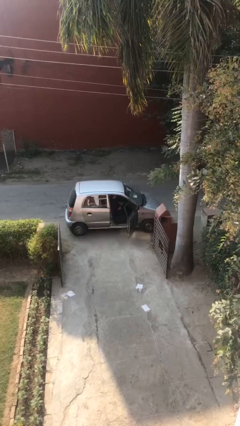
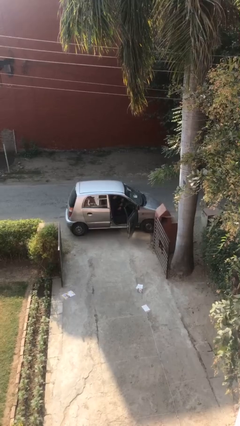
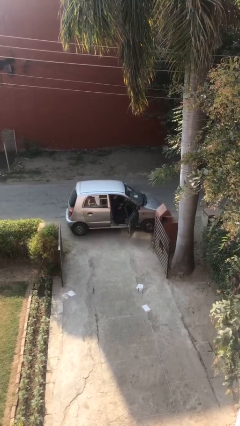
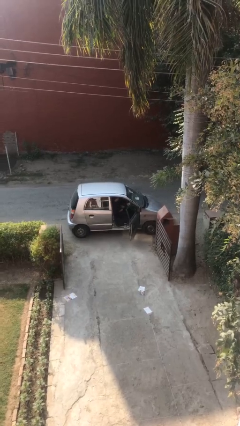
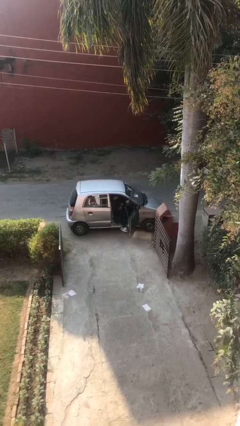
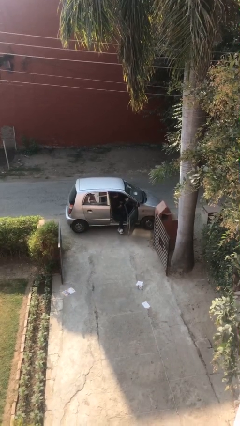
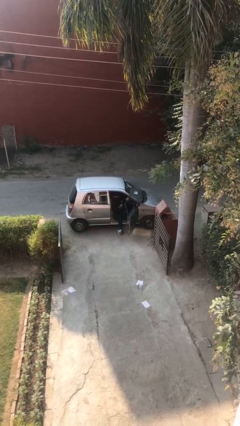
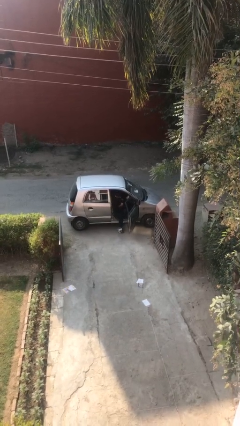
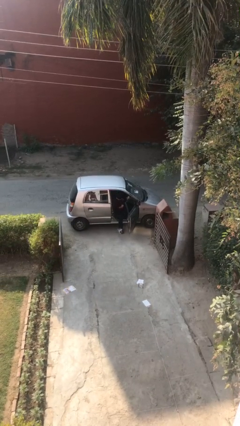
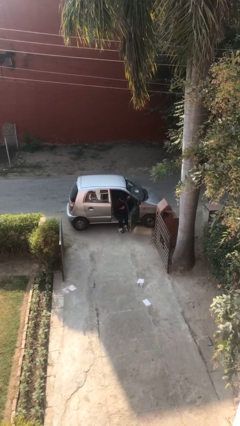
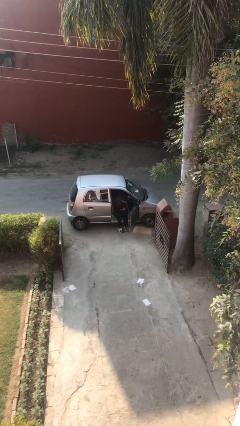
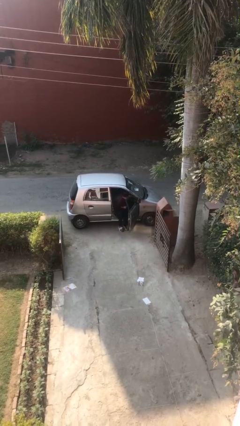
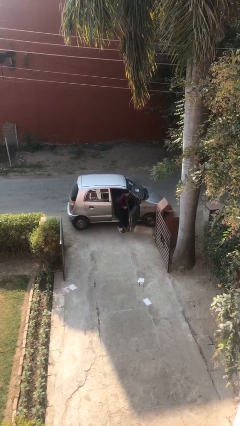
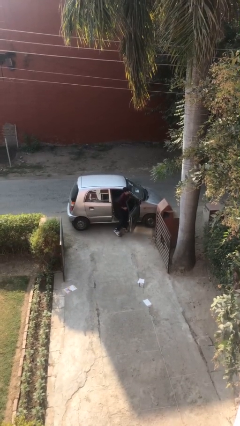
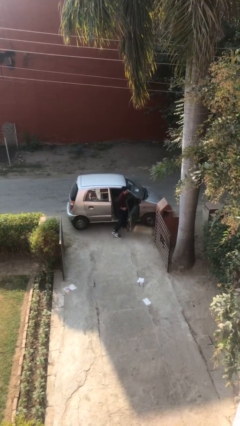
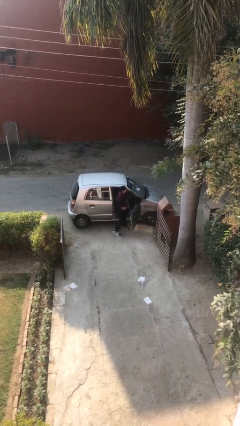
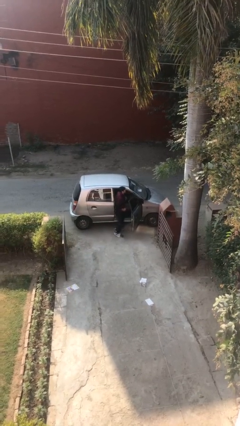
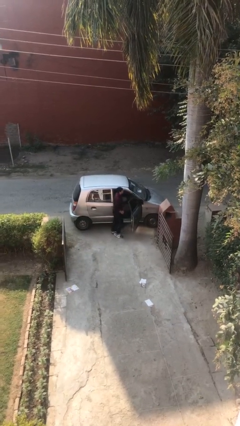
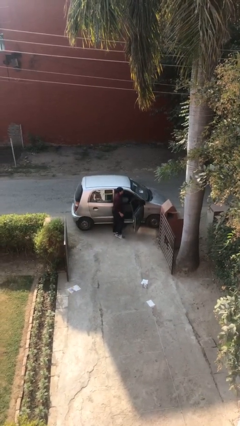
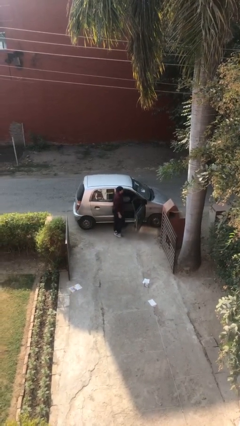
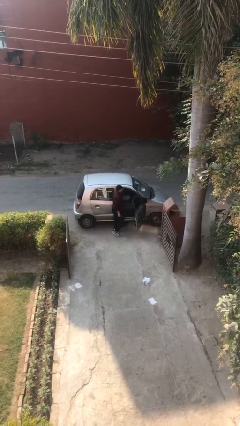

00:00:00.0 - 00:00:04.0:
person exits car

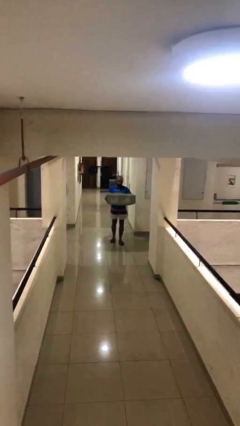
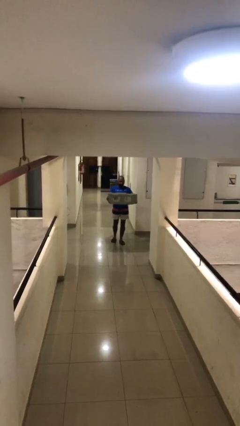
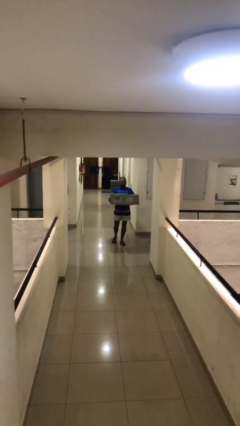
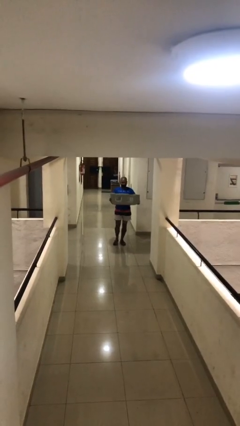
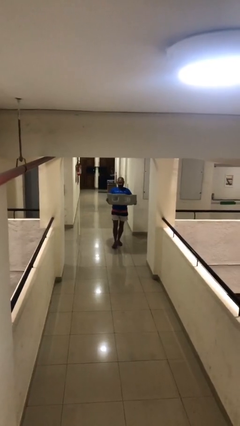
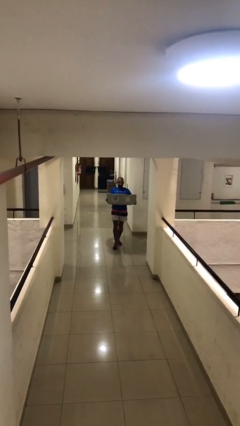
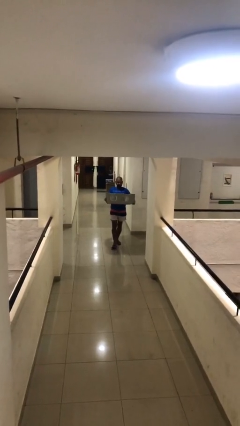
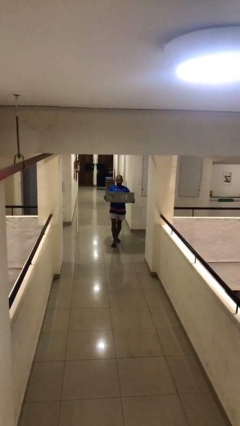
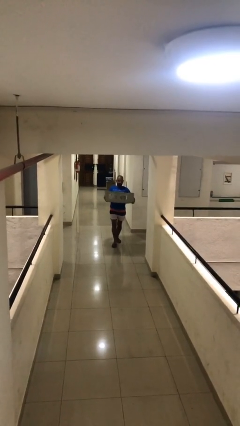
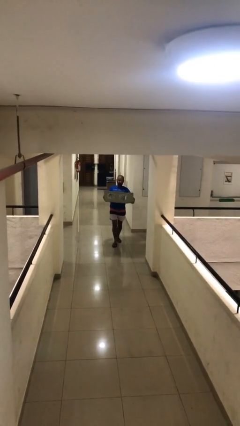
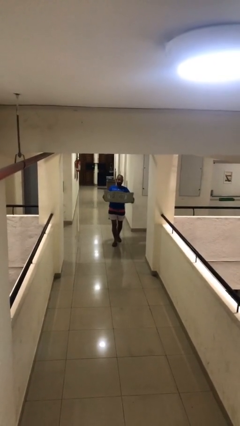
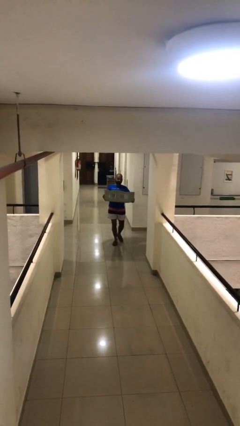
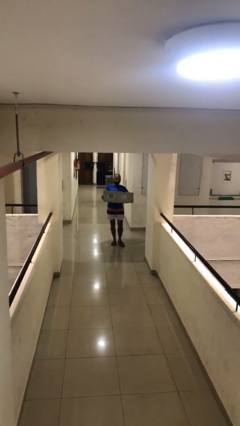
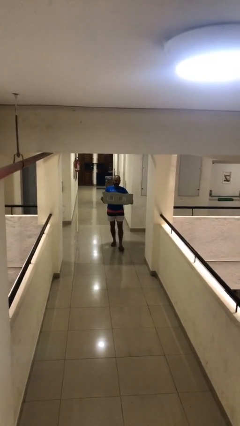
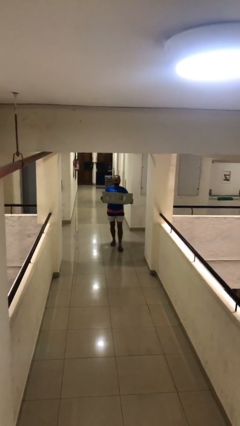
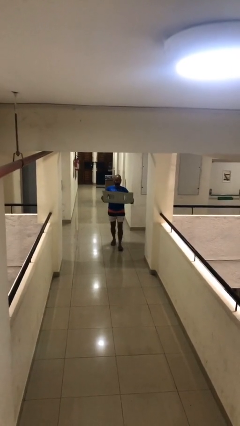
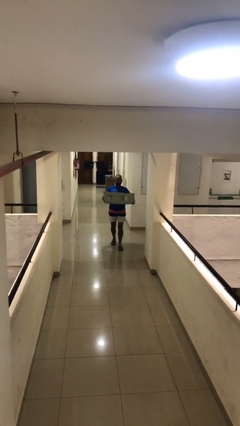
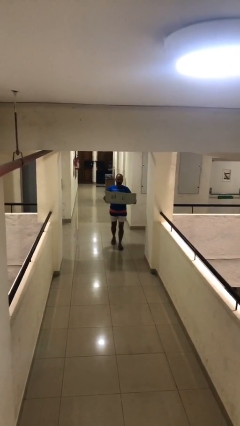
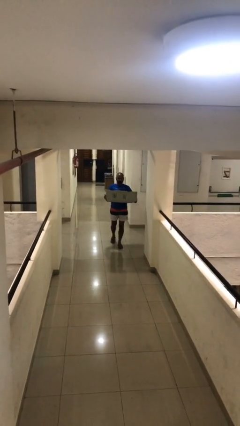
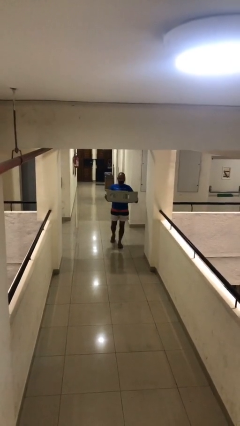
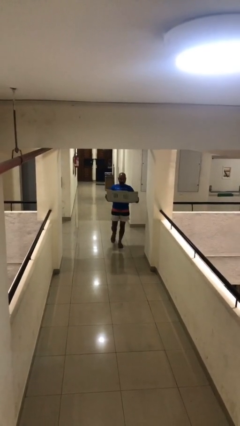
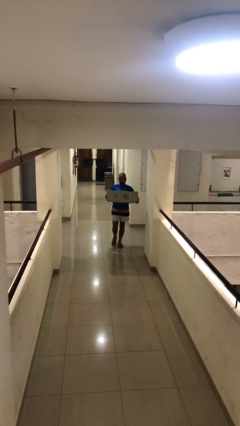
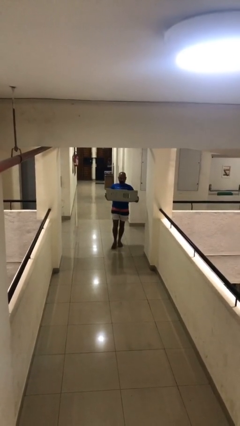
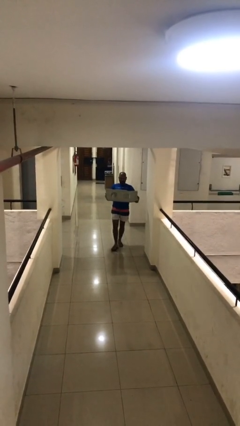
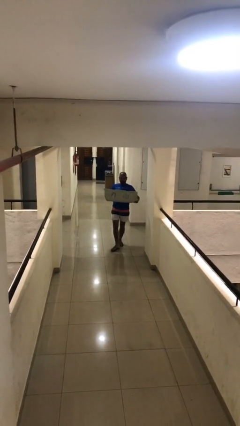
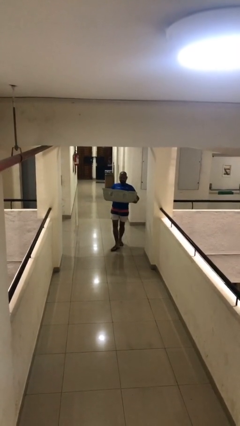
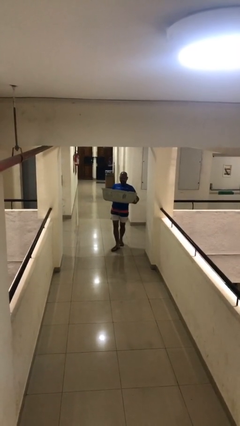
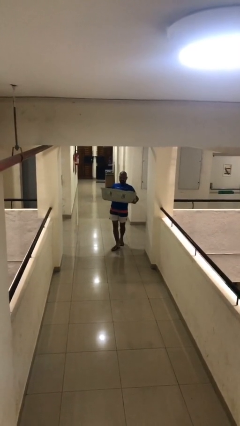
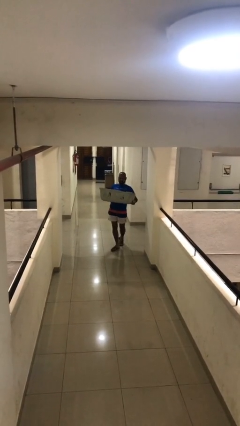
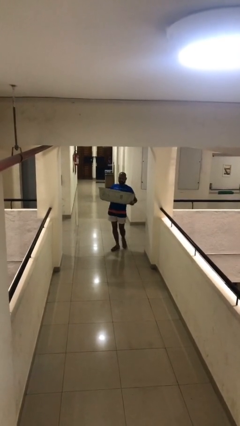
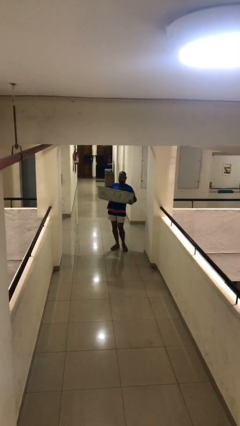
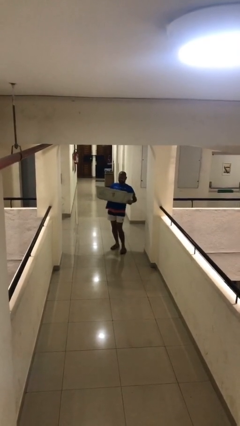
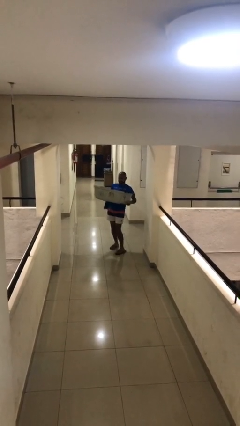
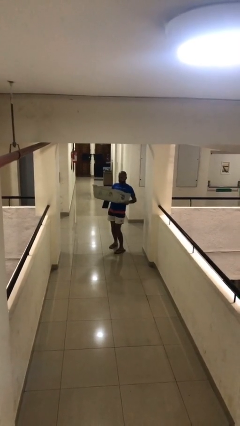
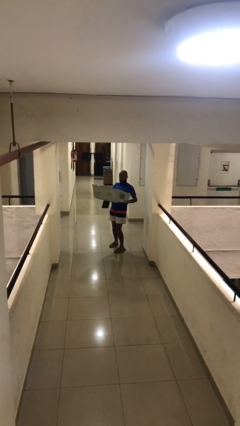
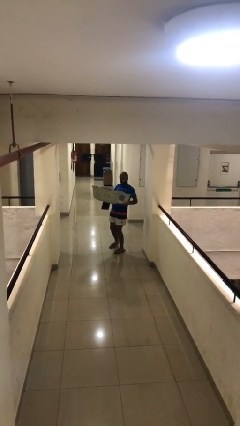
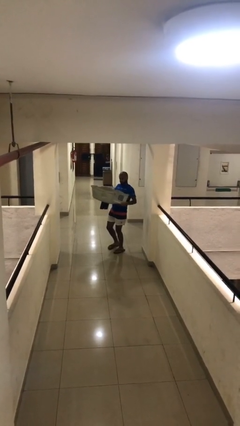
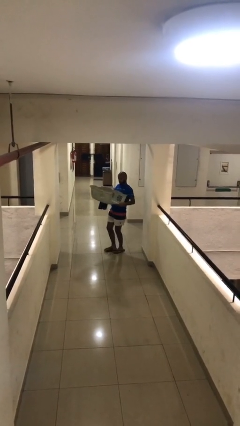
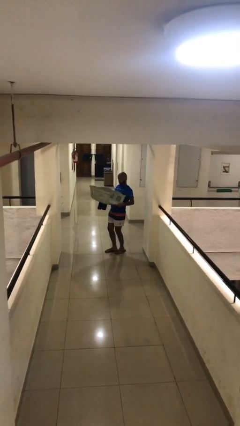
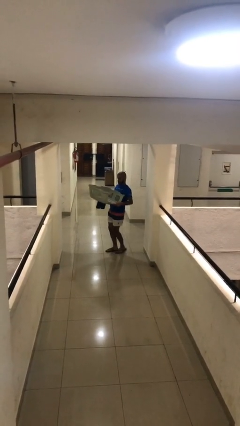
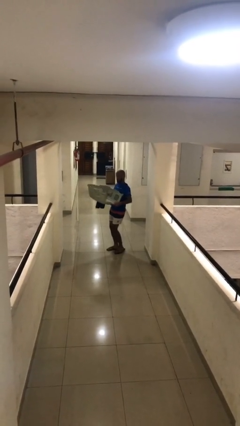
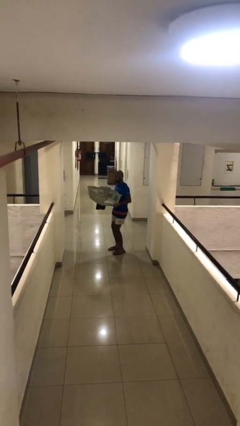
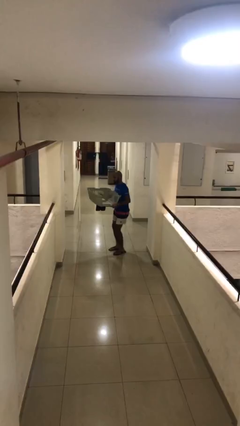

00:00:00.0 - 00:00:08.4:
person carries heavy object

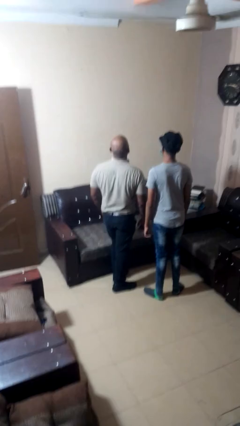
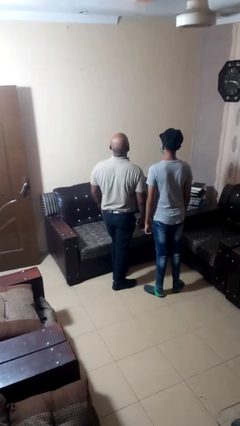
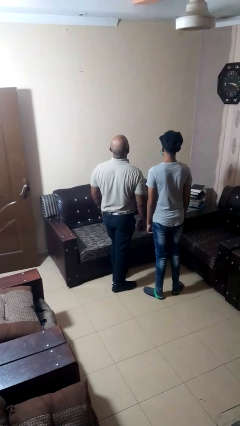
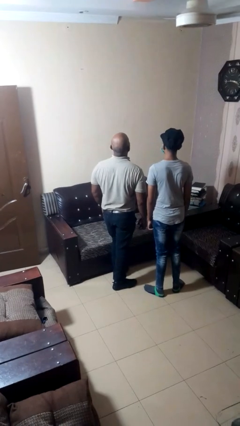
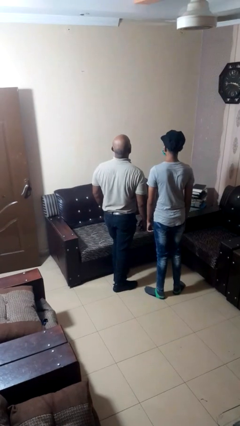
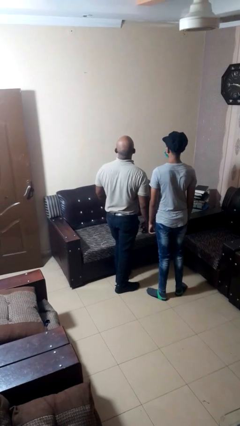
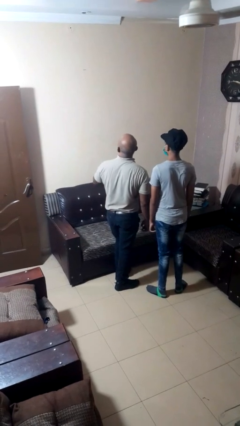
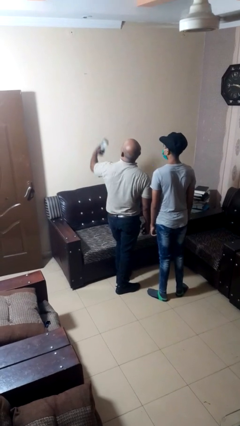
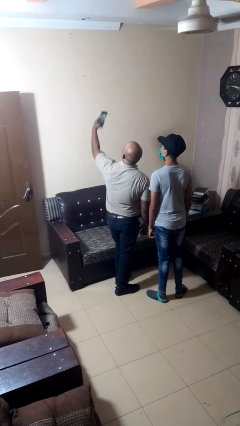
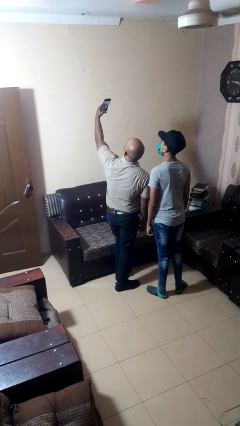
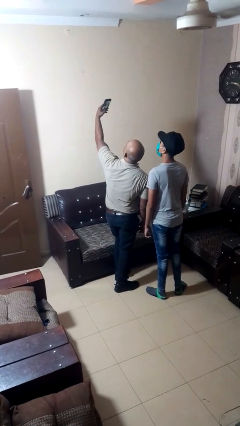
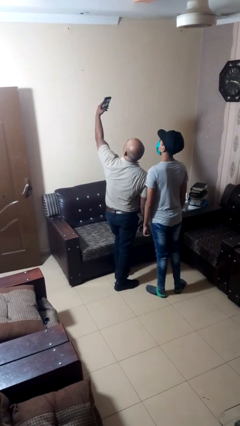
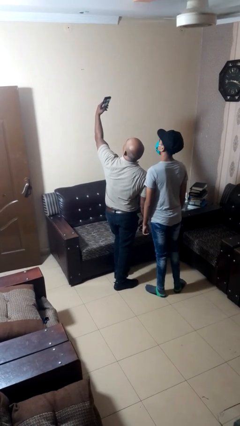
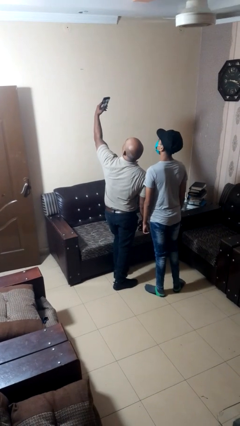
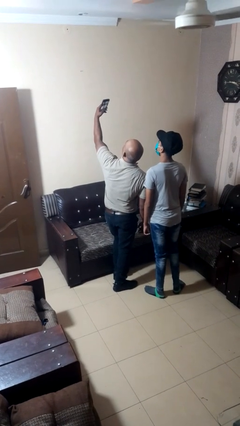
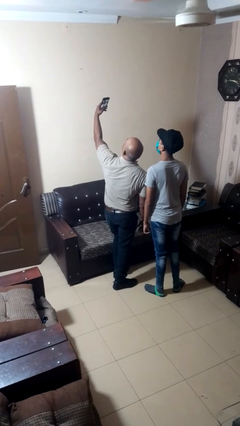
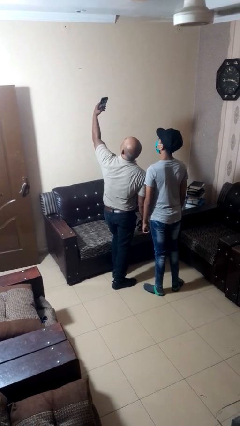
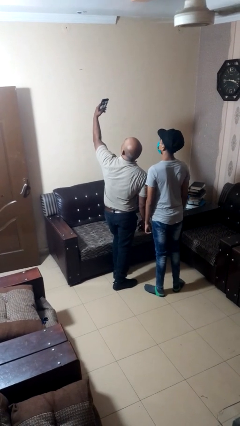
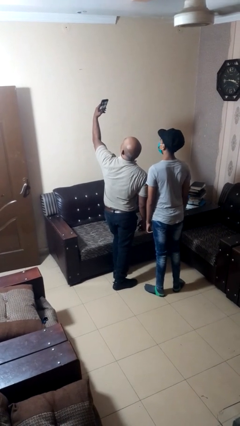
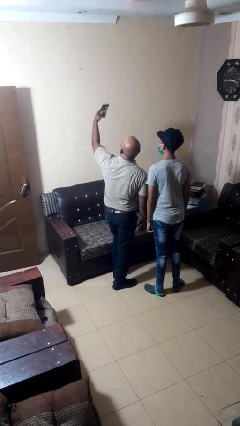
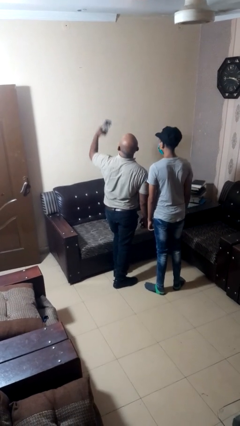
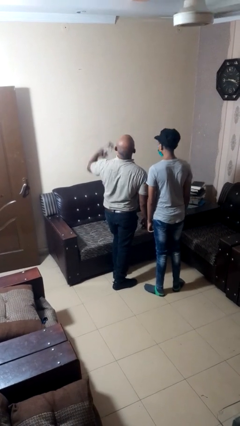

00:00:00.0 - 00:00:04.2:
person takes selfie with person

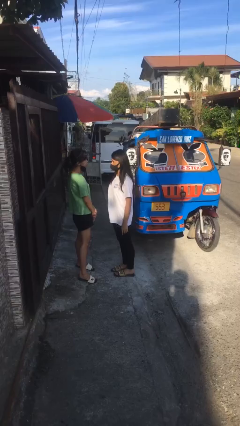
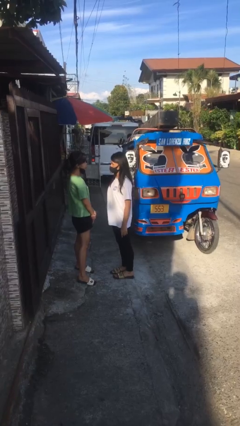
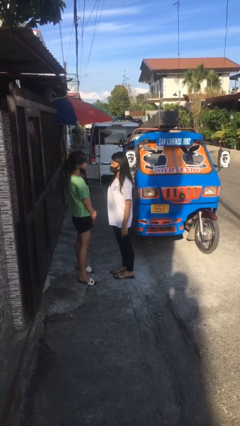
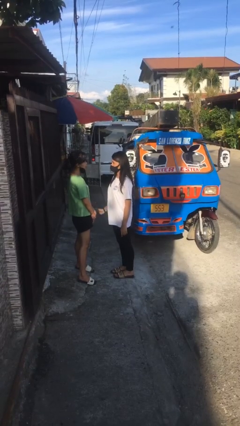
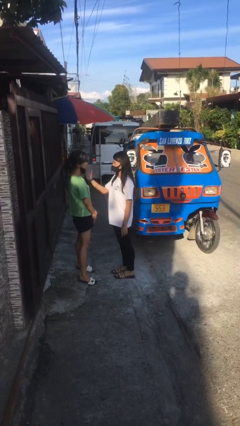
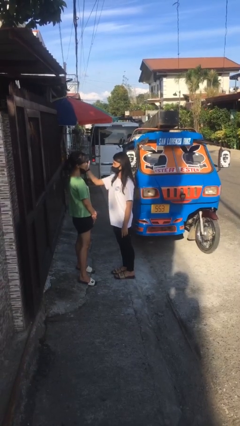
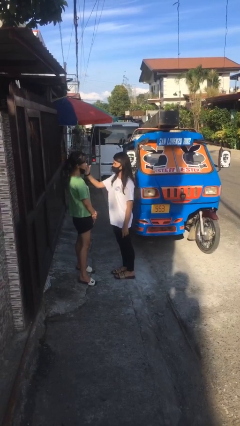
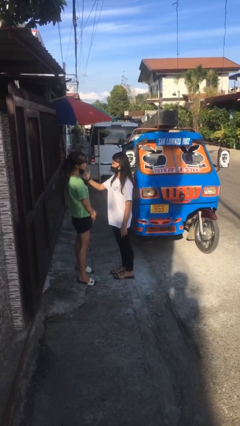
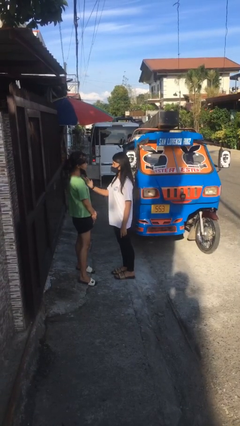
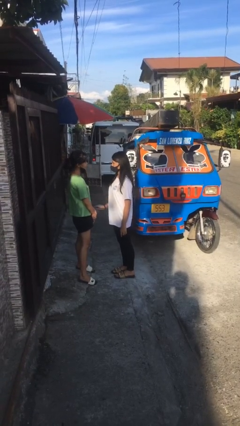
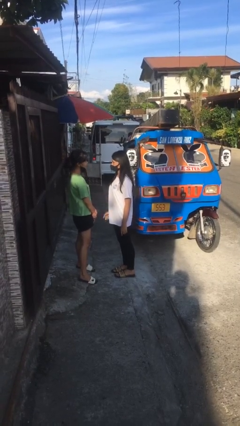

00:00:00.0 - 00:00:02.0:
person touches face of person
